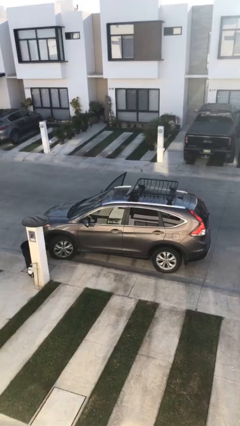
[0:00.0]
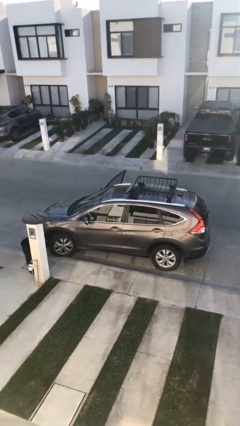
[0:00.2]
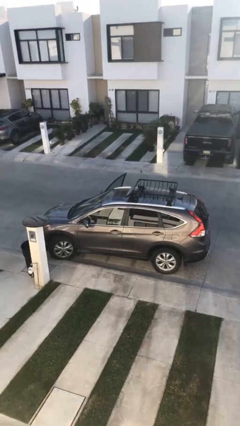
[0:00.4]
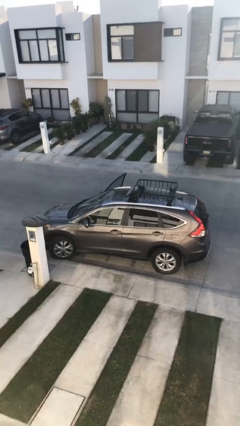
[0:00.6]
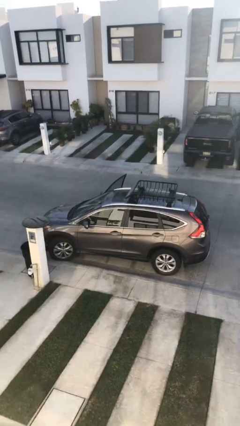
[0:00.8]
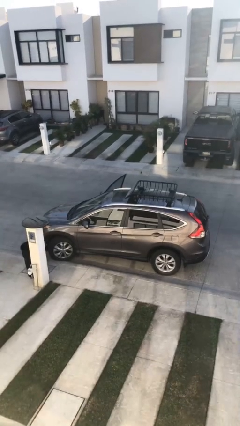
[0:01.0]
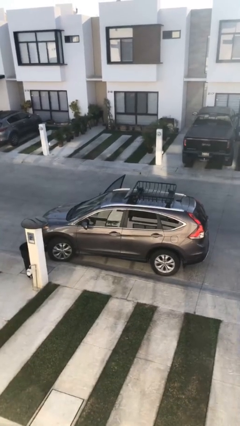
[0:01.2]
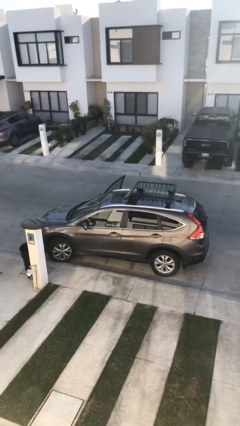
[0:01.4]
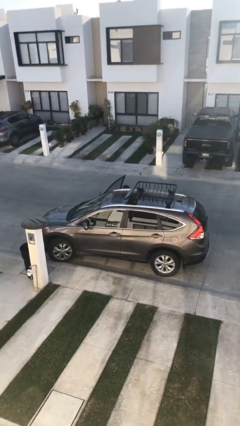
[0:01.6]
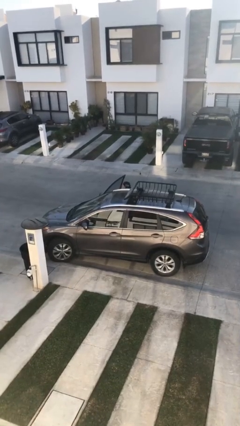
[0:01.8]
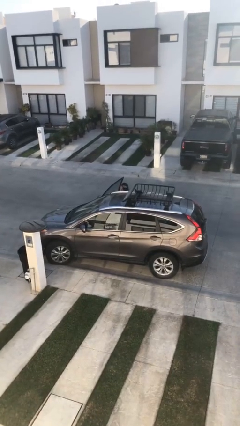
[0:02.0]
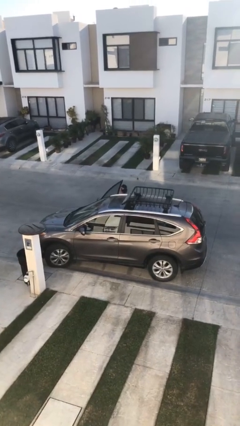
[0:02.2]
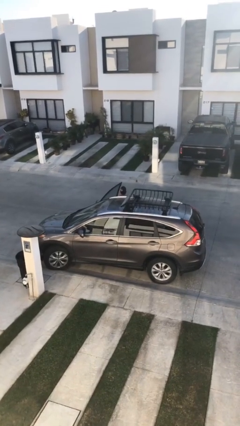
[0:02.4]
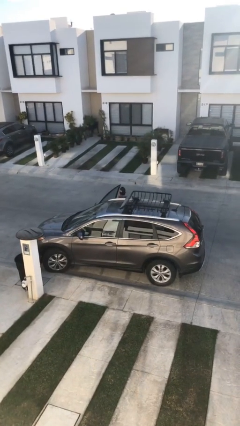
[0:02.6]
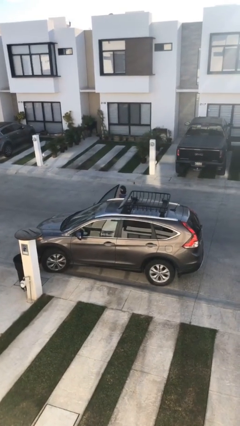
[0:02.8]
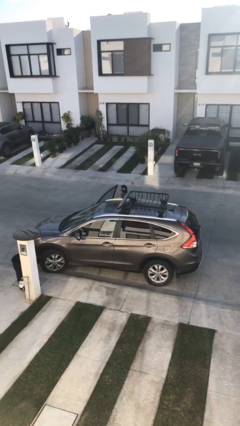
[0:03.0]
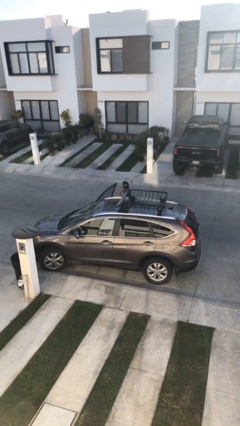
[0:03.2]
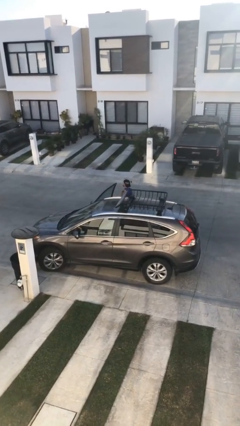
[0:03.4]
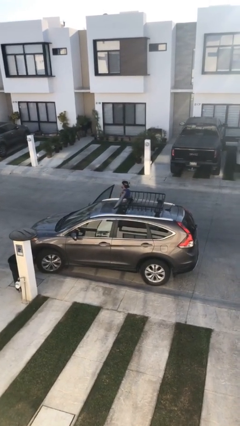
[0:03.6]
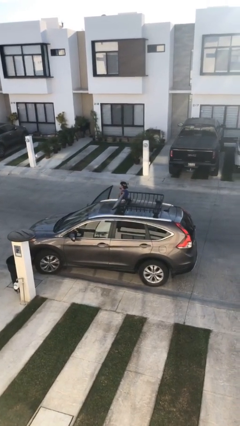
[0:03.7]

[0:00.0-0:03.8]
person exits car

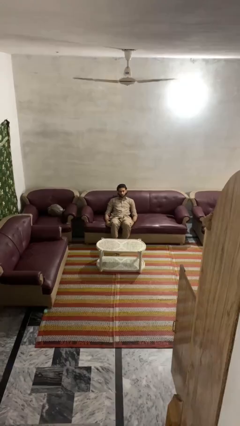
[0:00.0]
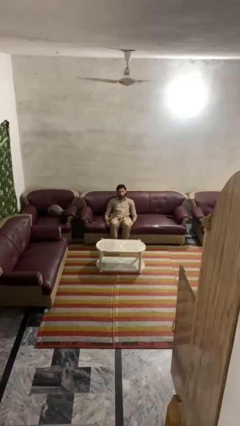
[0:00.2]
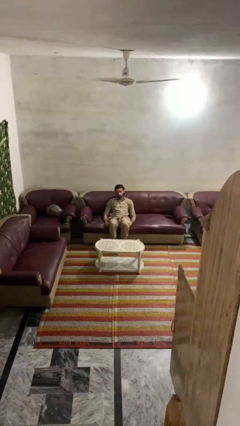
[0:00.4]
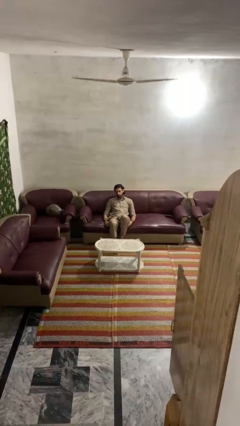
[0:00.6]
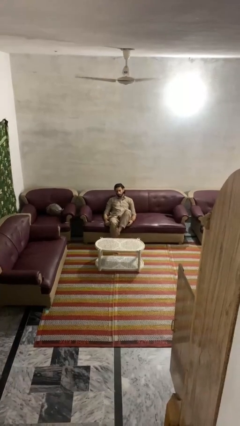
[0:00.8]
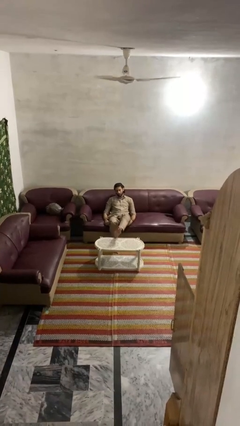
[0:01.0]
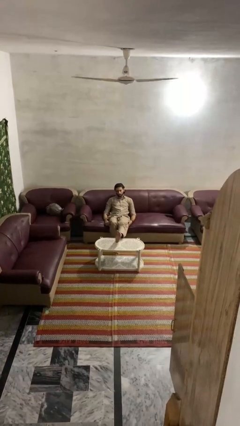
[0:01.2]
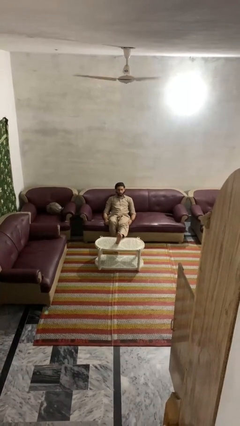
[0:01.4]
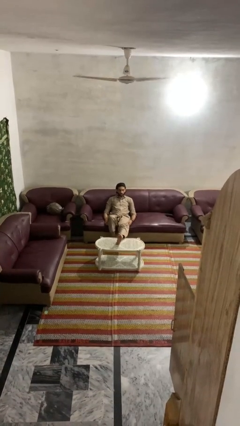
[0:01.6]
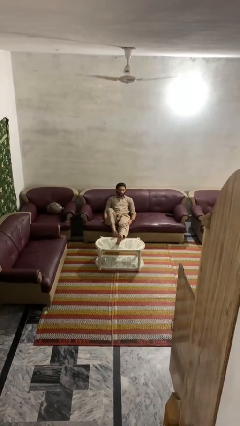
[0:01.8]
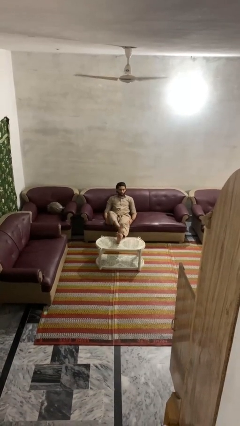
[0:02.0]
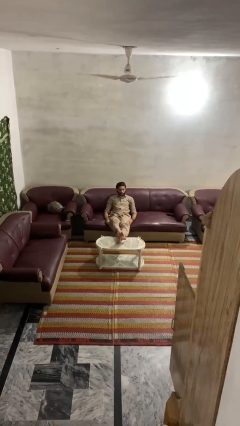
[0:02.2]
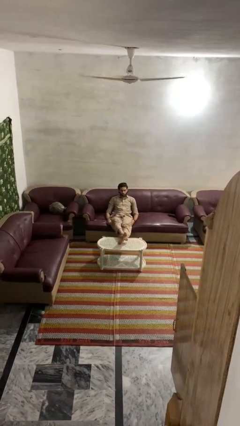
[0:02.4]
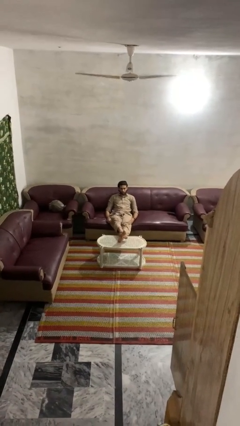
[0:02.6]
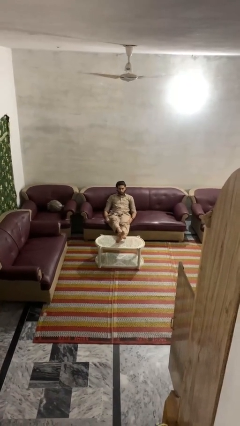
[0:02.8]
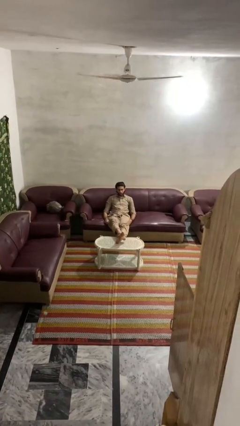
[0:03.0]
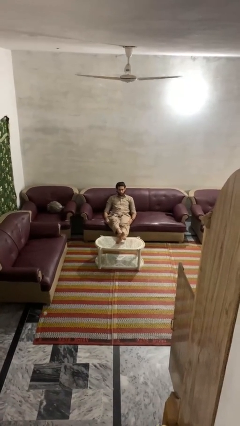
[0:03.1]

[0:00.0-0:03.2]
person puts feet up

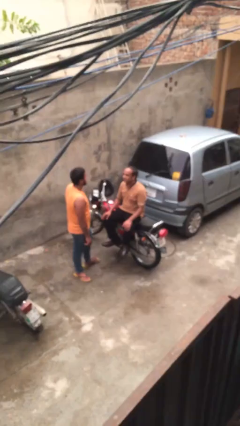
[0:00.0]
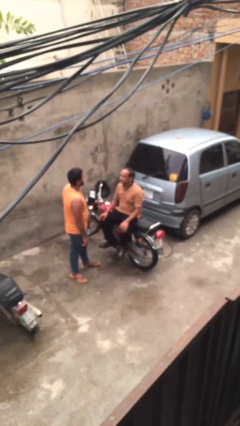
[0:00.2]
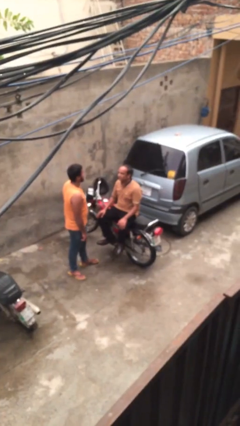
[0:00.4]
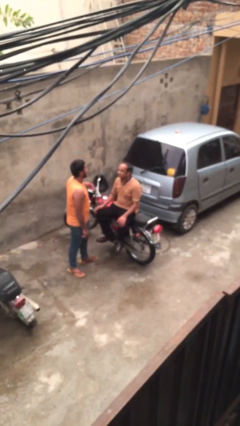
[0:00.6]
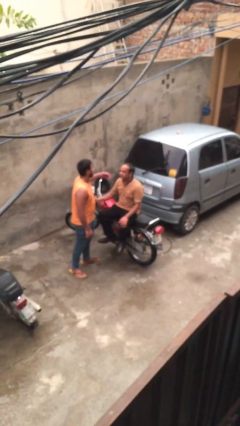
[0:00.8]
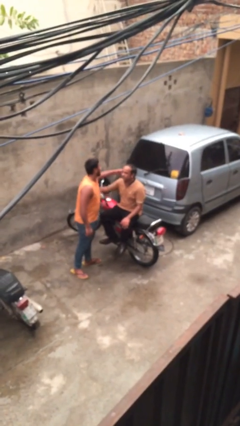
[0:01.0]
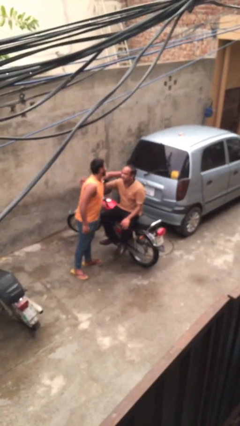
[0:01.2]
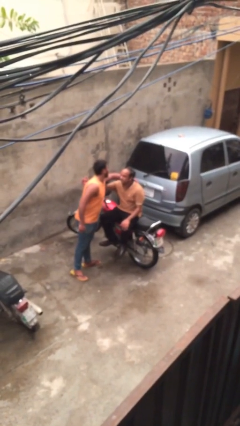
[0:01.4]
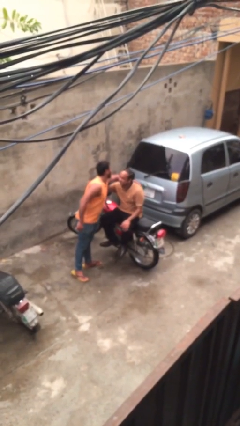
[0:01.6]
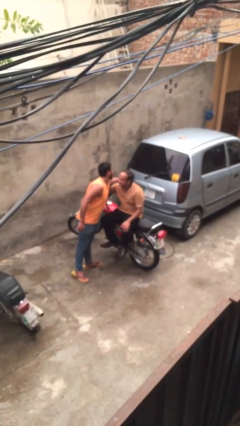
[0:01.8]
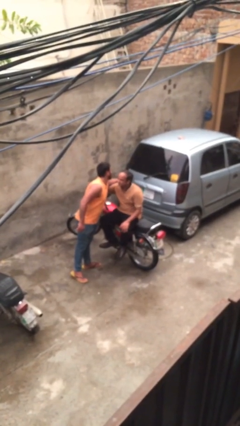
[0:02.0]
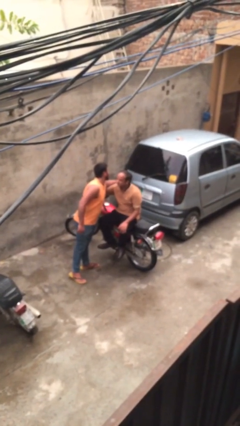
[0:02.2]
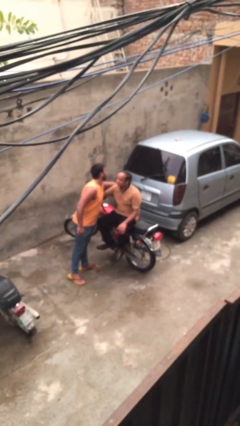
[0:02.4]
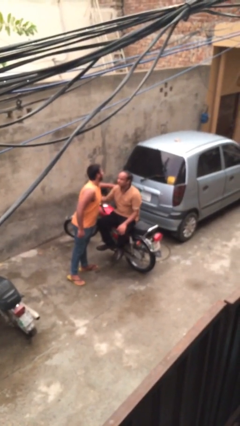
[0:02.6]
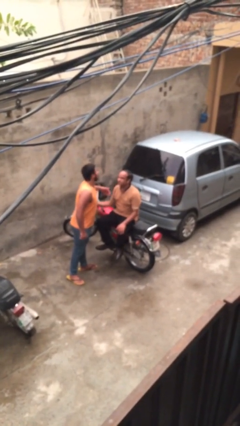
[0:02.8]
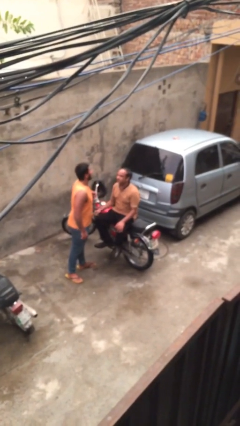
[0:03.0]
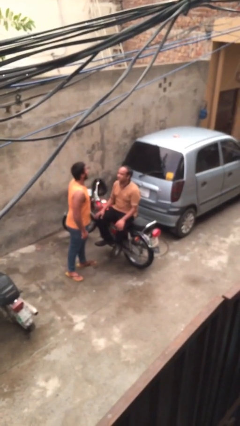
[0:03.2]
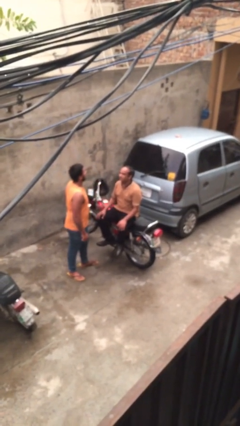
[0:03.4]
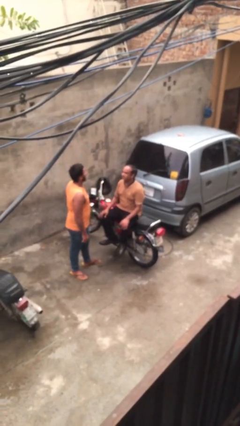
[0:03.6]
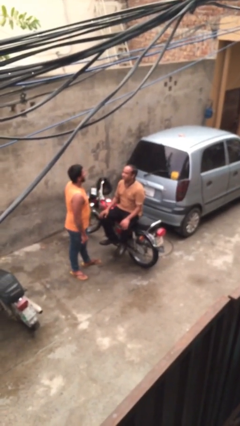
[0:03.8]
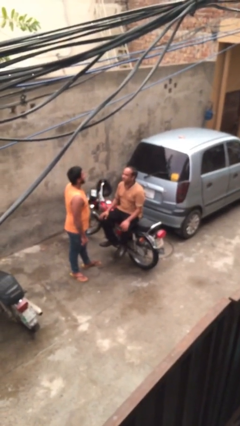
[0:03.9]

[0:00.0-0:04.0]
person embraces person

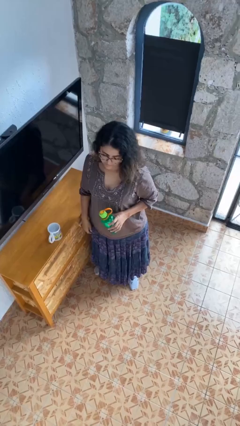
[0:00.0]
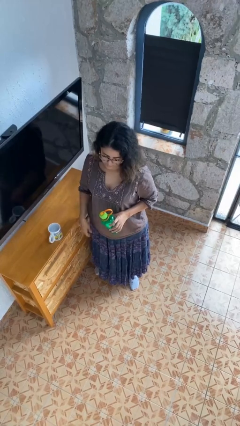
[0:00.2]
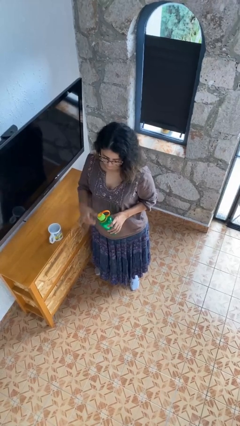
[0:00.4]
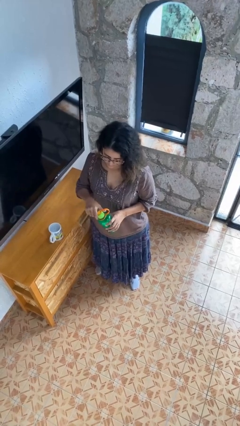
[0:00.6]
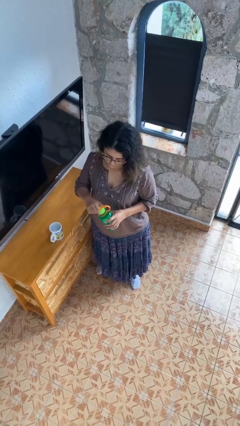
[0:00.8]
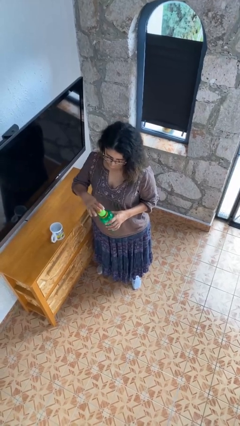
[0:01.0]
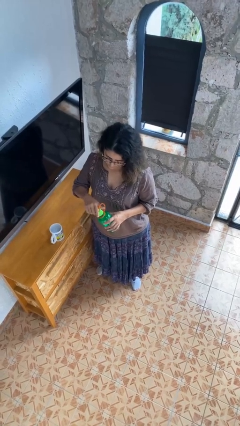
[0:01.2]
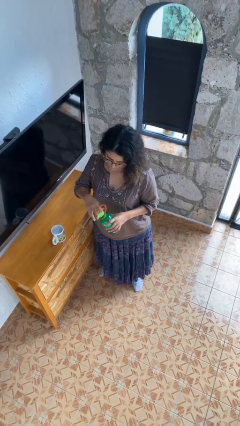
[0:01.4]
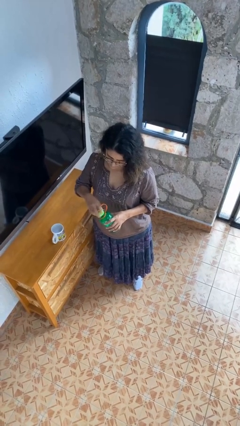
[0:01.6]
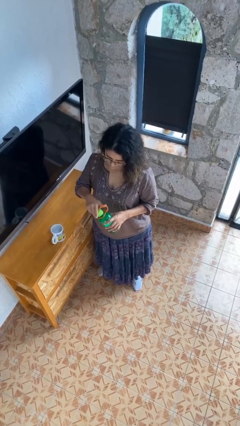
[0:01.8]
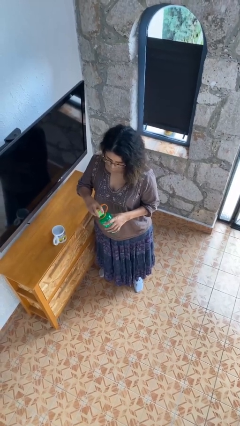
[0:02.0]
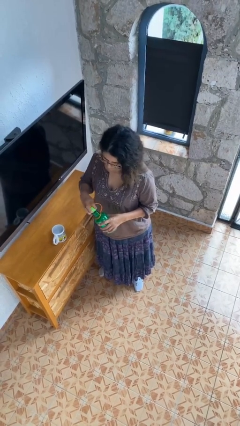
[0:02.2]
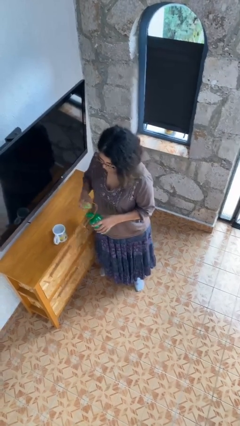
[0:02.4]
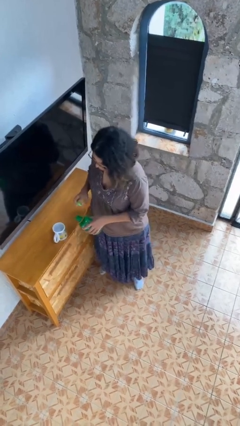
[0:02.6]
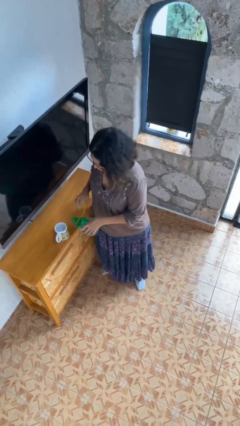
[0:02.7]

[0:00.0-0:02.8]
person unscrews lid from bottle

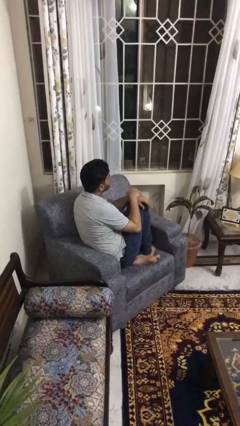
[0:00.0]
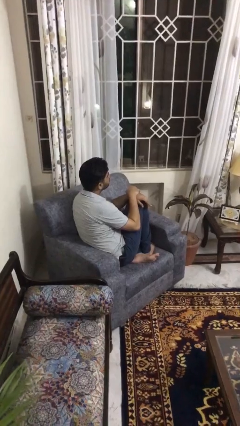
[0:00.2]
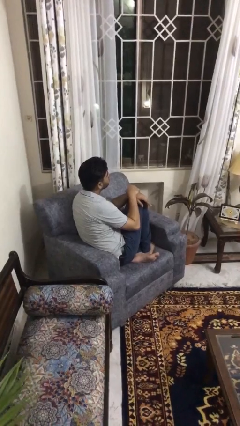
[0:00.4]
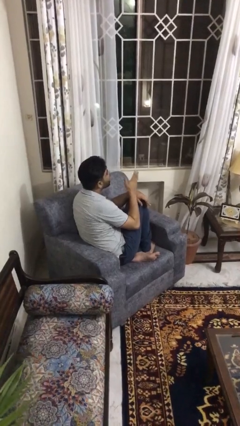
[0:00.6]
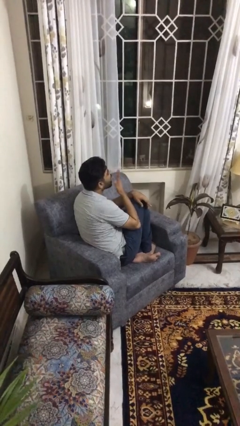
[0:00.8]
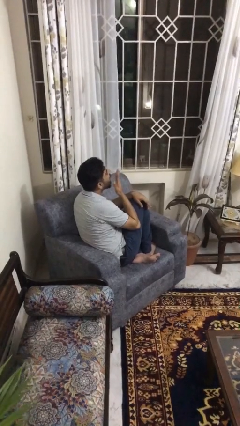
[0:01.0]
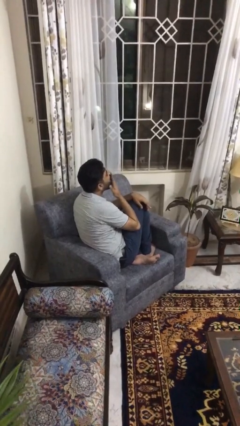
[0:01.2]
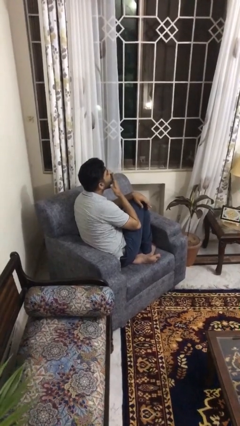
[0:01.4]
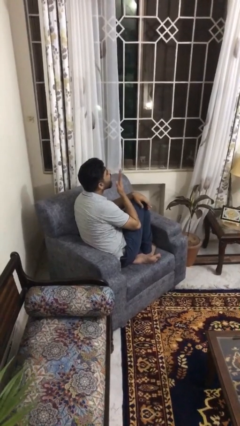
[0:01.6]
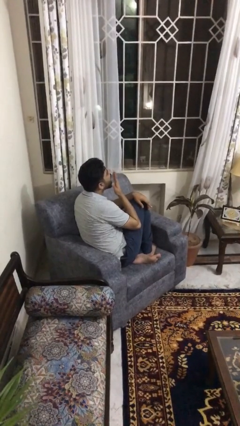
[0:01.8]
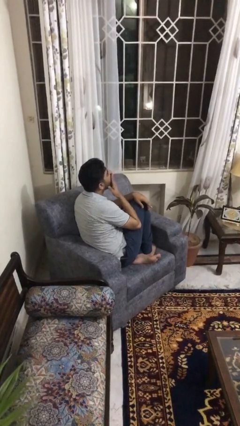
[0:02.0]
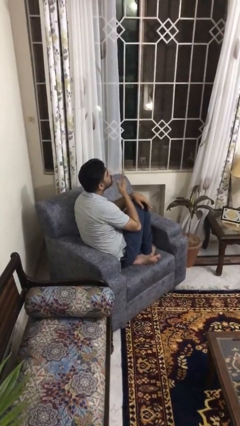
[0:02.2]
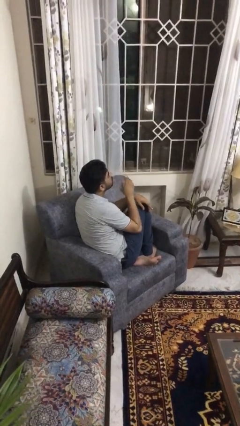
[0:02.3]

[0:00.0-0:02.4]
person yawns

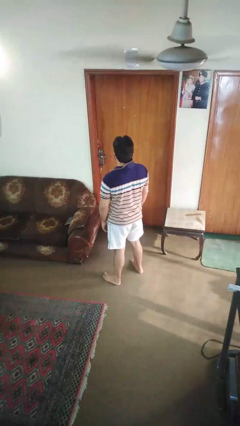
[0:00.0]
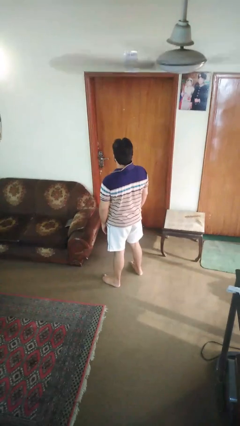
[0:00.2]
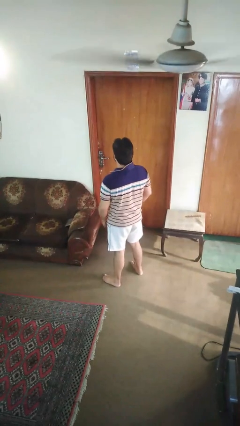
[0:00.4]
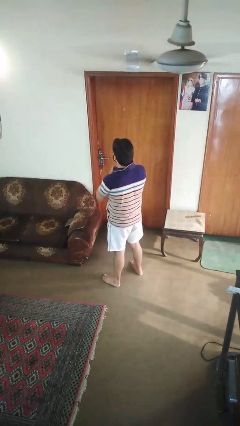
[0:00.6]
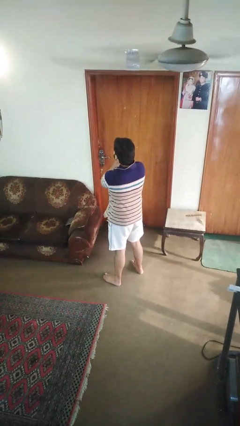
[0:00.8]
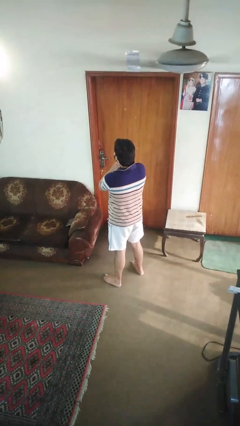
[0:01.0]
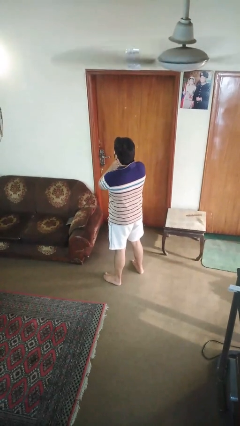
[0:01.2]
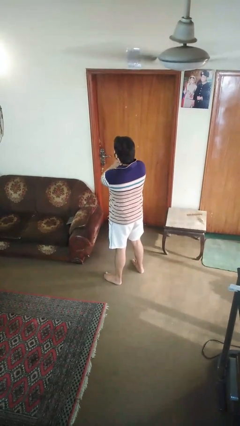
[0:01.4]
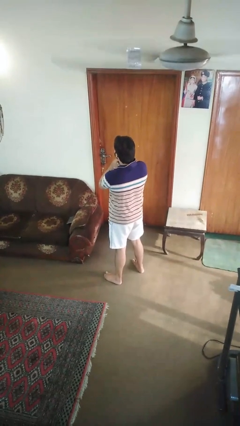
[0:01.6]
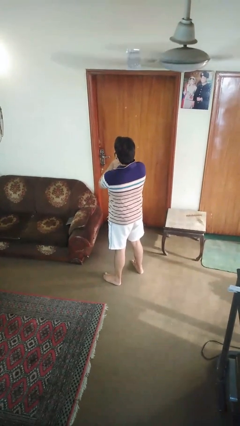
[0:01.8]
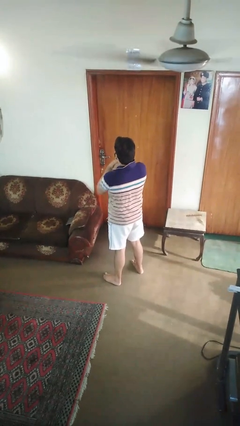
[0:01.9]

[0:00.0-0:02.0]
person rubs neck
